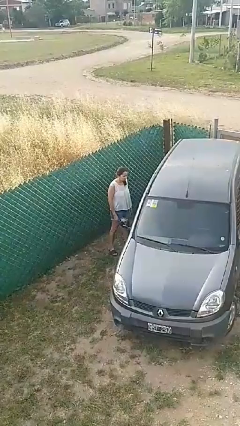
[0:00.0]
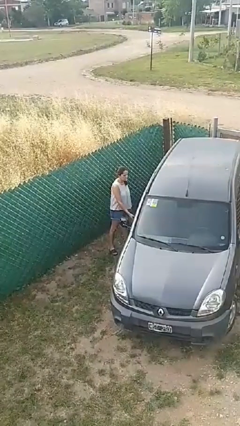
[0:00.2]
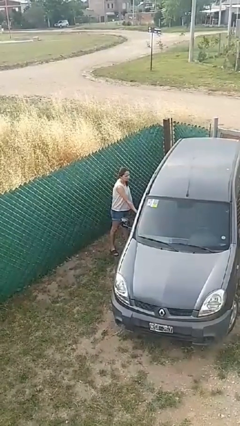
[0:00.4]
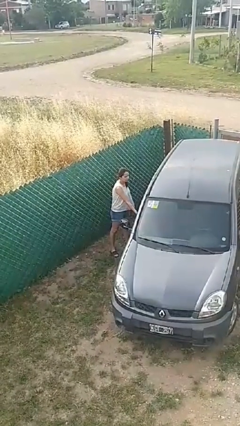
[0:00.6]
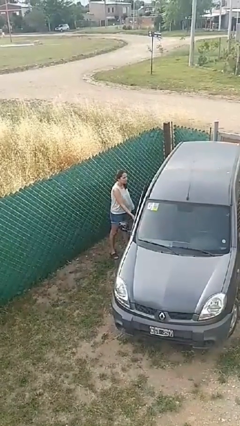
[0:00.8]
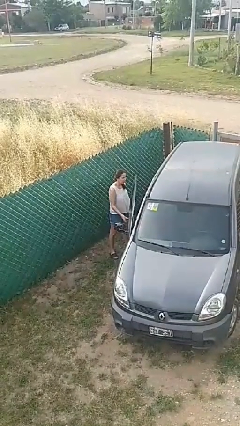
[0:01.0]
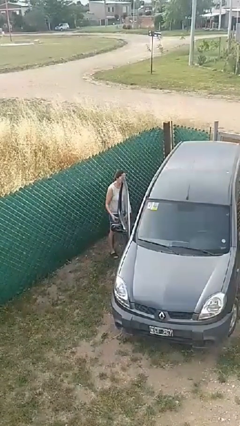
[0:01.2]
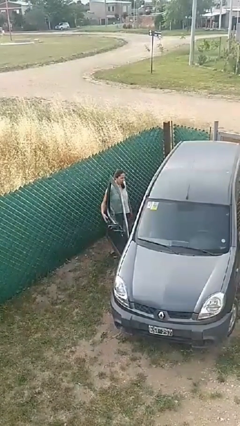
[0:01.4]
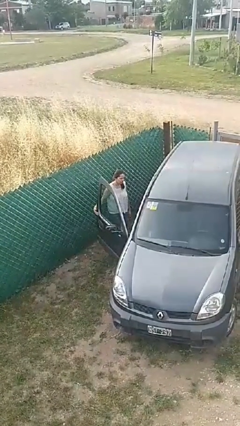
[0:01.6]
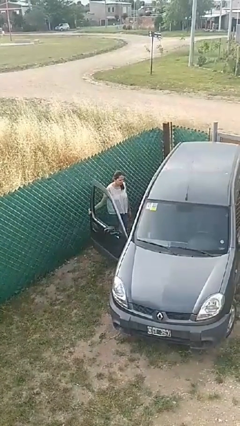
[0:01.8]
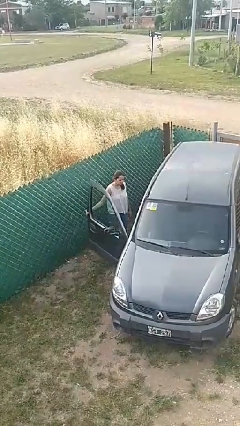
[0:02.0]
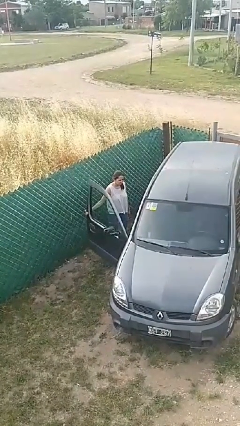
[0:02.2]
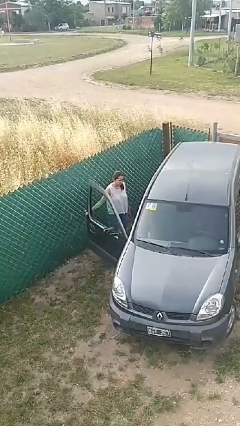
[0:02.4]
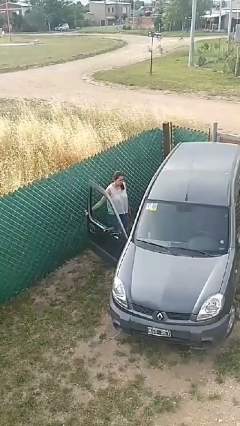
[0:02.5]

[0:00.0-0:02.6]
person opens car door

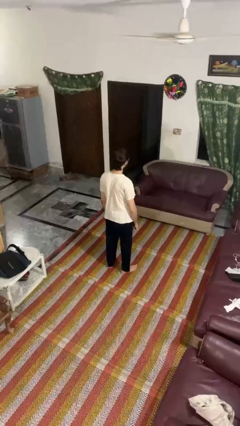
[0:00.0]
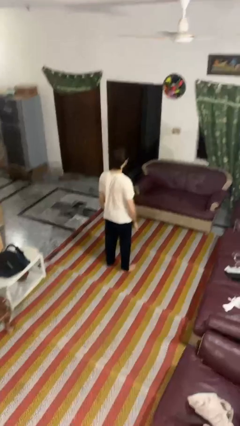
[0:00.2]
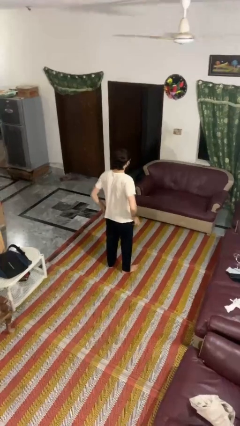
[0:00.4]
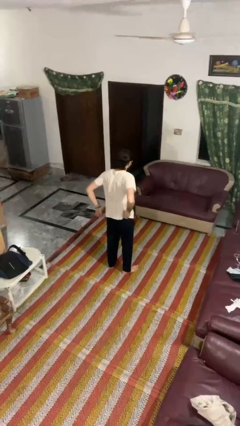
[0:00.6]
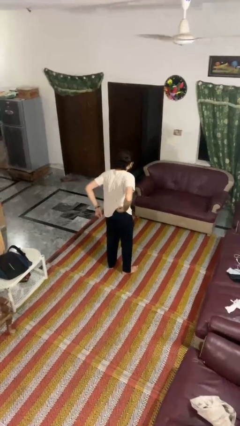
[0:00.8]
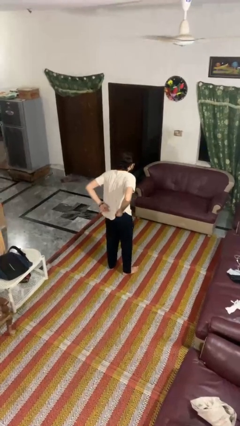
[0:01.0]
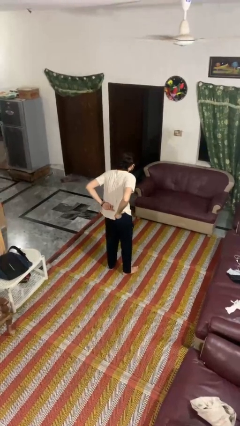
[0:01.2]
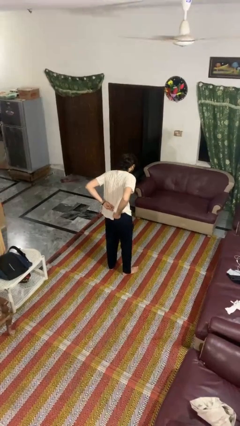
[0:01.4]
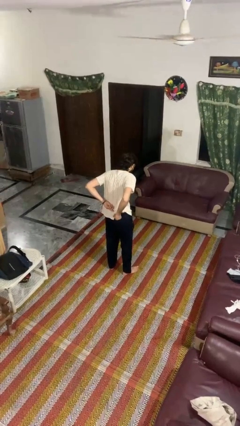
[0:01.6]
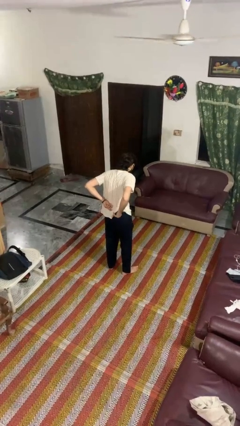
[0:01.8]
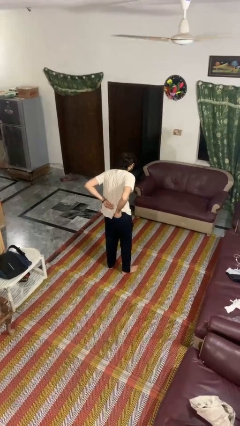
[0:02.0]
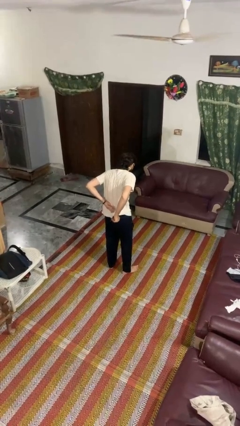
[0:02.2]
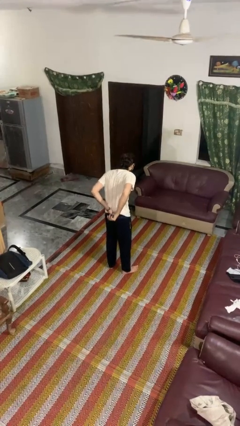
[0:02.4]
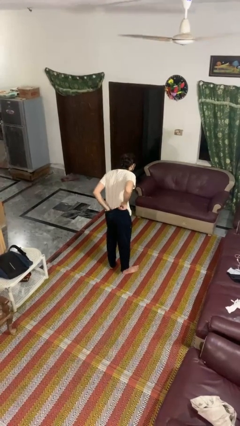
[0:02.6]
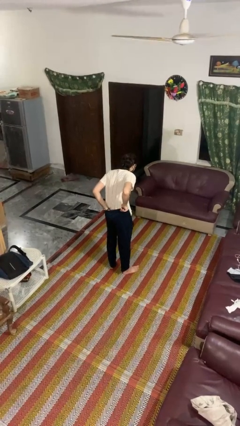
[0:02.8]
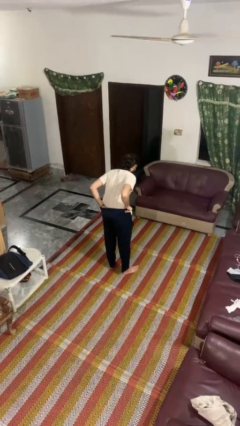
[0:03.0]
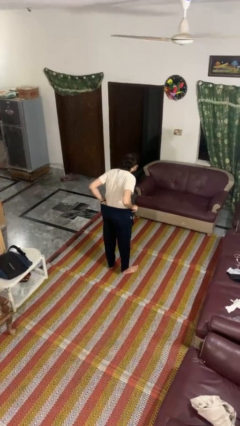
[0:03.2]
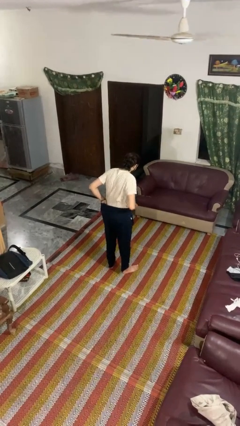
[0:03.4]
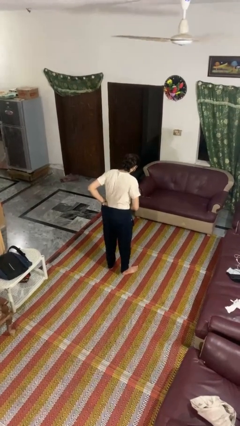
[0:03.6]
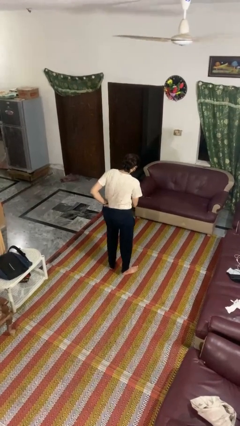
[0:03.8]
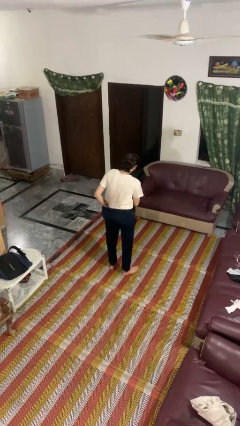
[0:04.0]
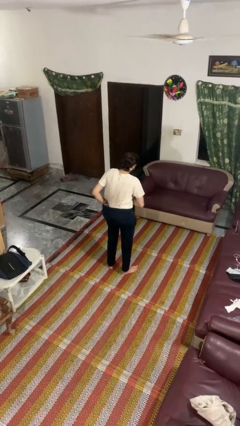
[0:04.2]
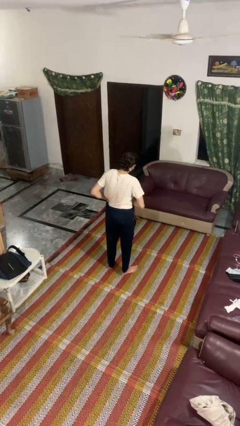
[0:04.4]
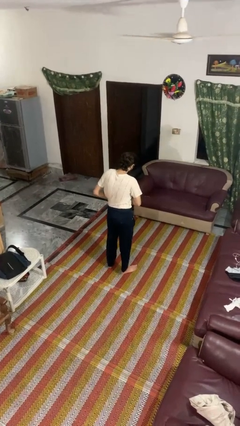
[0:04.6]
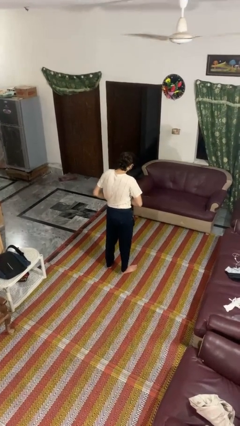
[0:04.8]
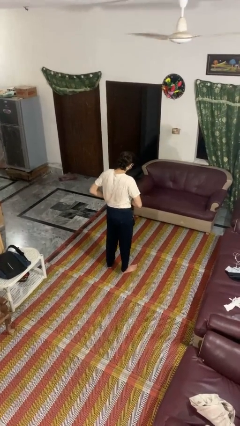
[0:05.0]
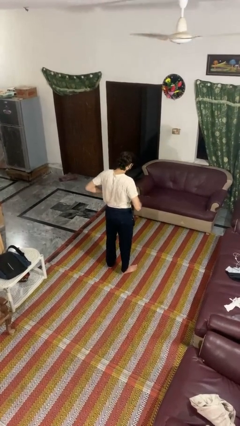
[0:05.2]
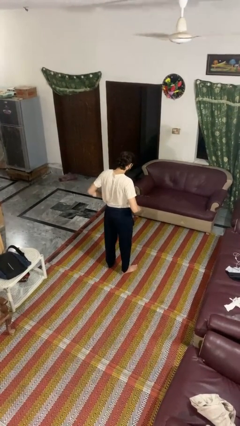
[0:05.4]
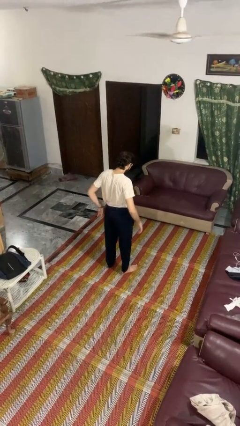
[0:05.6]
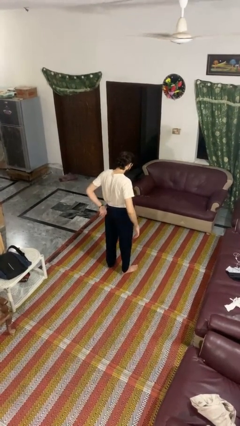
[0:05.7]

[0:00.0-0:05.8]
person tucks in shirt

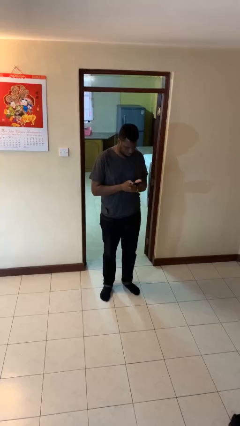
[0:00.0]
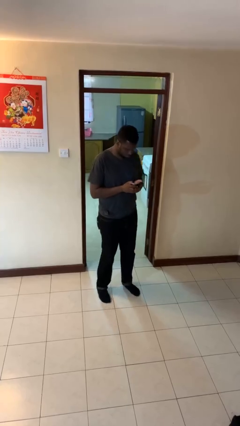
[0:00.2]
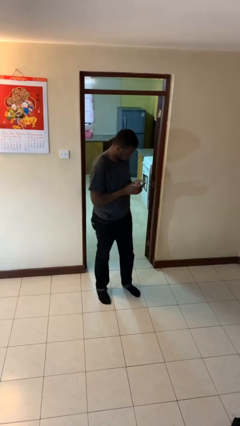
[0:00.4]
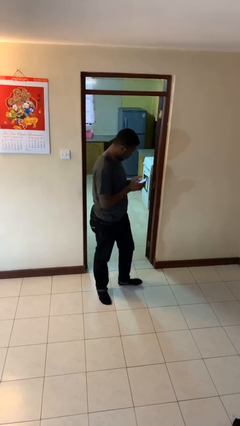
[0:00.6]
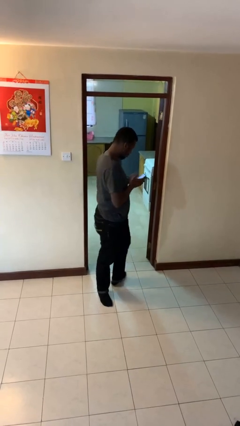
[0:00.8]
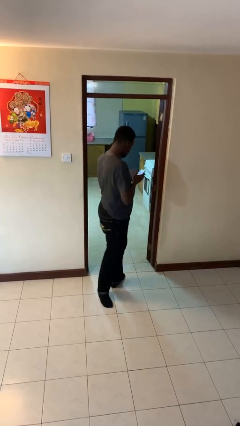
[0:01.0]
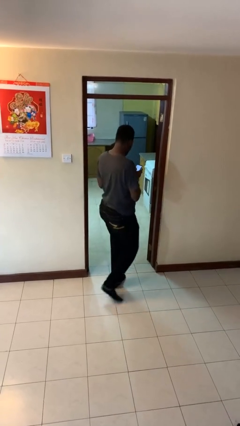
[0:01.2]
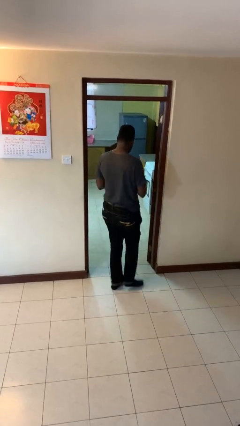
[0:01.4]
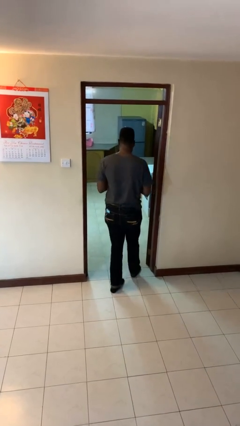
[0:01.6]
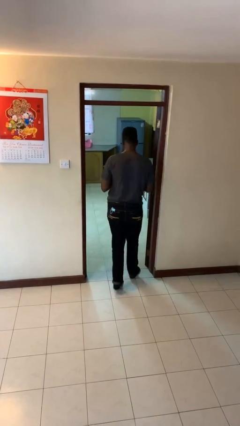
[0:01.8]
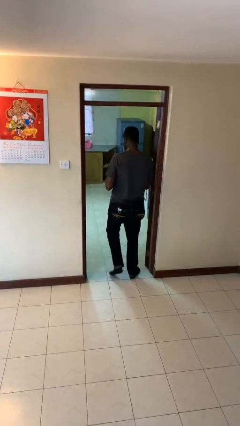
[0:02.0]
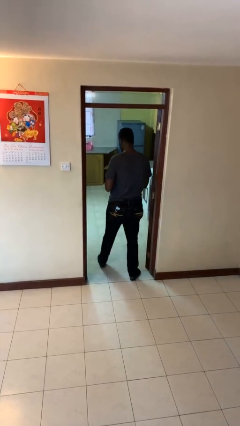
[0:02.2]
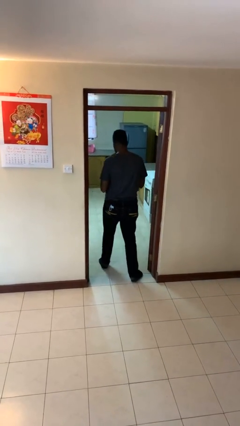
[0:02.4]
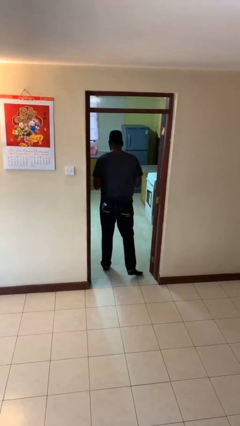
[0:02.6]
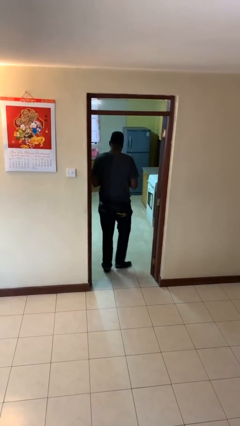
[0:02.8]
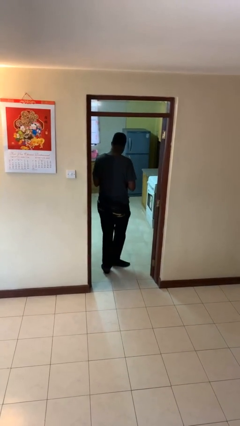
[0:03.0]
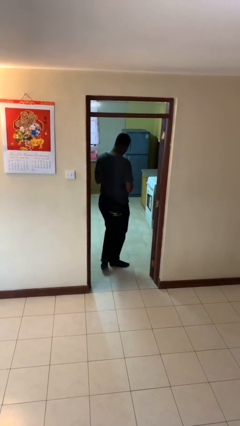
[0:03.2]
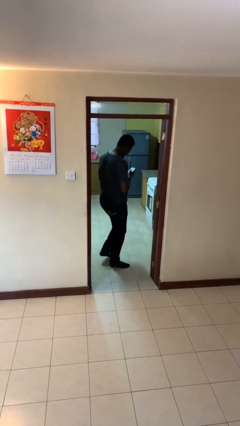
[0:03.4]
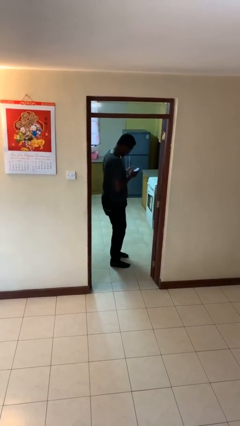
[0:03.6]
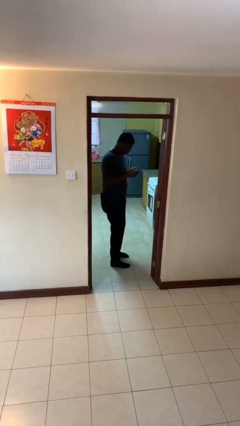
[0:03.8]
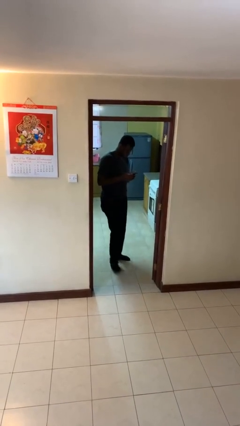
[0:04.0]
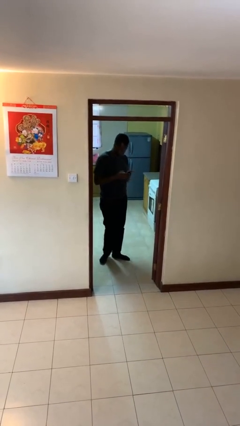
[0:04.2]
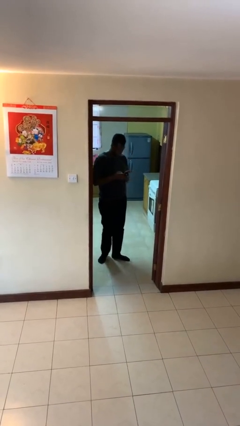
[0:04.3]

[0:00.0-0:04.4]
person exits scene through structure

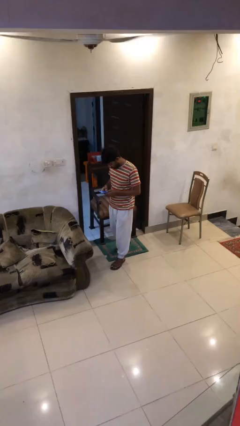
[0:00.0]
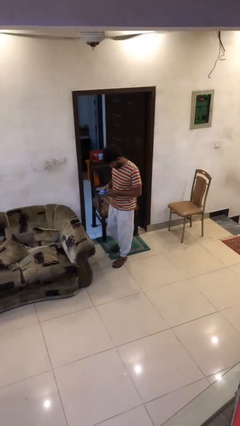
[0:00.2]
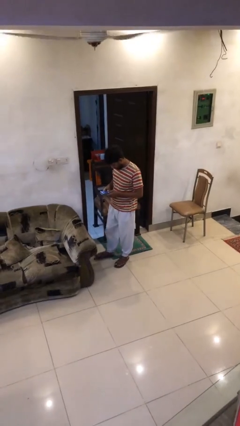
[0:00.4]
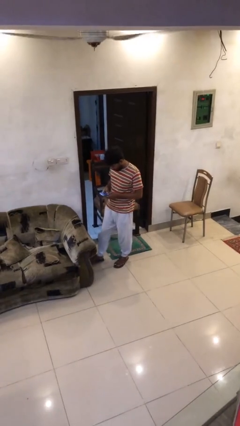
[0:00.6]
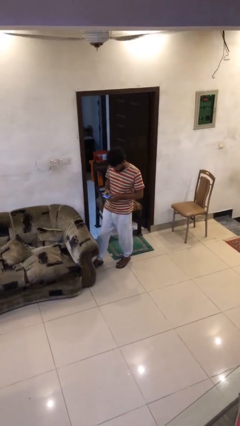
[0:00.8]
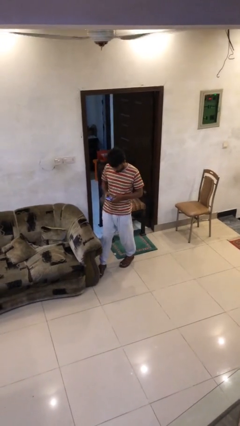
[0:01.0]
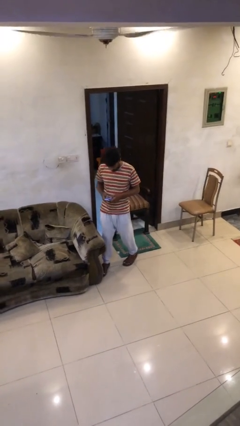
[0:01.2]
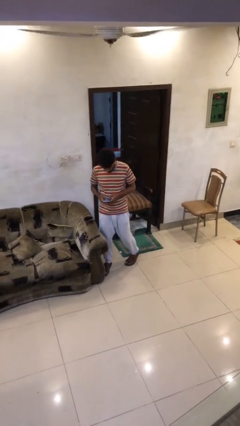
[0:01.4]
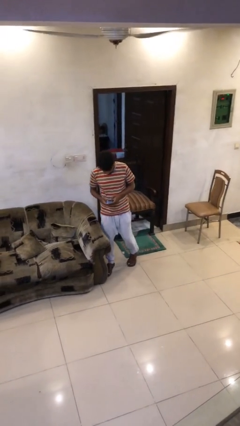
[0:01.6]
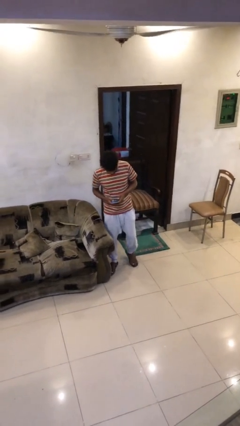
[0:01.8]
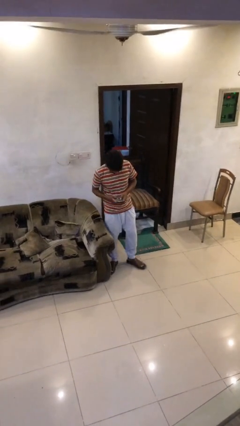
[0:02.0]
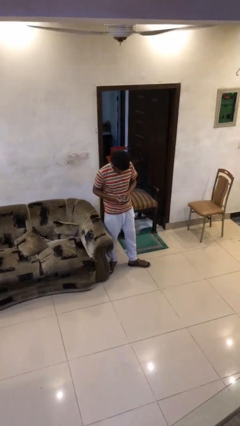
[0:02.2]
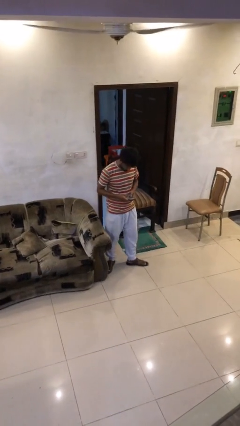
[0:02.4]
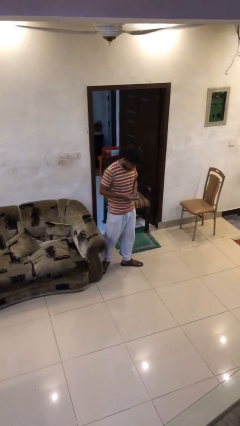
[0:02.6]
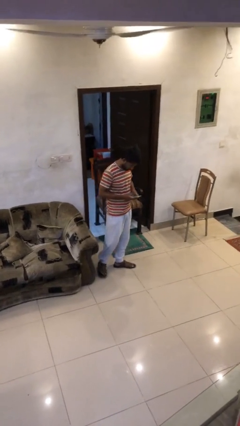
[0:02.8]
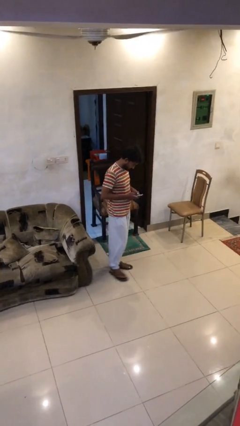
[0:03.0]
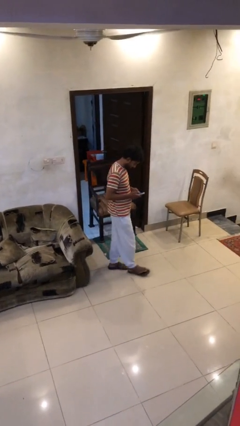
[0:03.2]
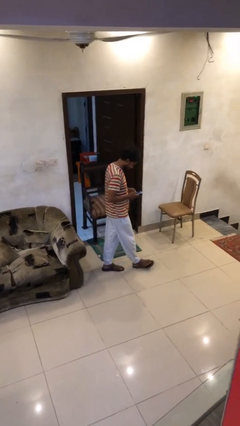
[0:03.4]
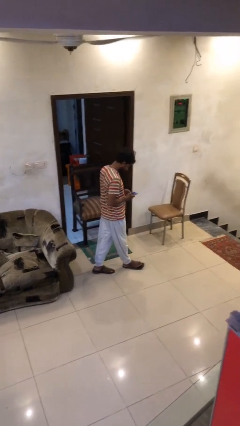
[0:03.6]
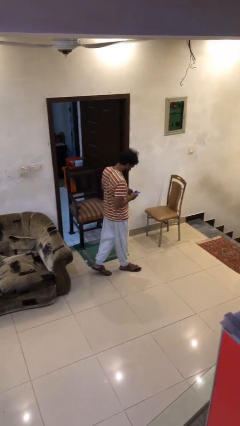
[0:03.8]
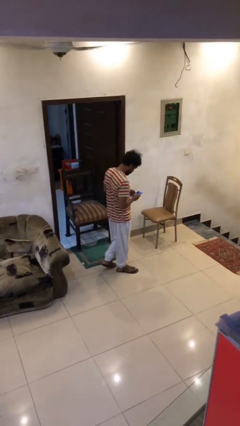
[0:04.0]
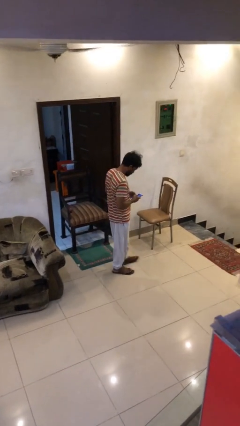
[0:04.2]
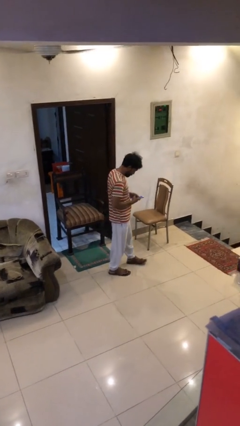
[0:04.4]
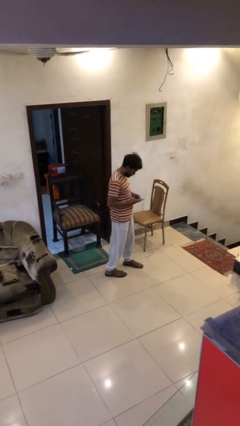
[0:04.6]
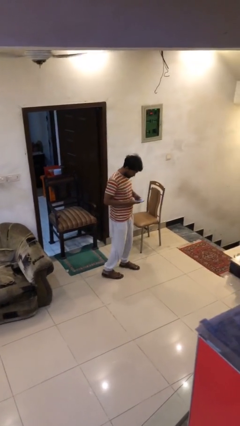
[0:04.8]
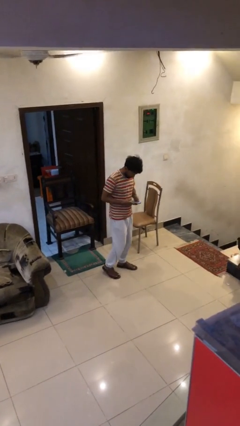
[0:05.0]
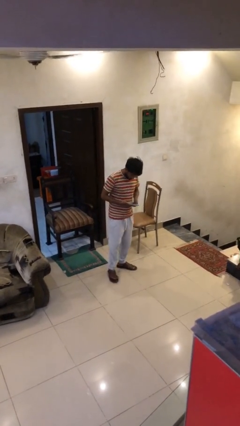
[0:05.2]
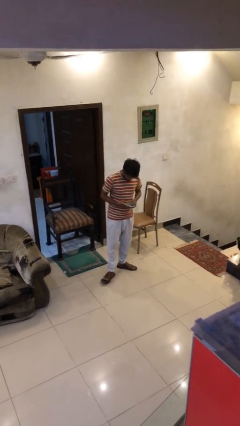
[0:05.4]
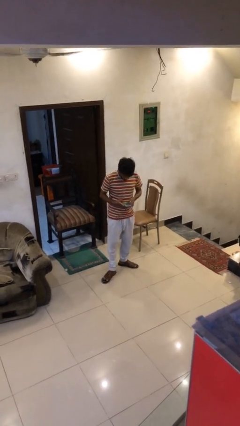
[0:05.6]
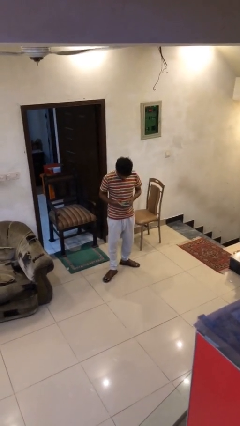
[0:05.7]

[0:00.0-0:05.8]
person texts on phone
